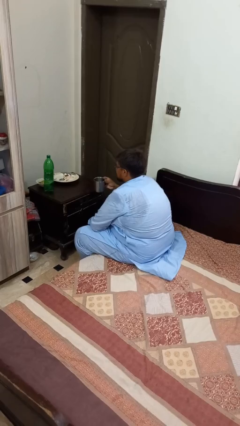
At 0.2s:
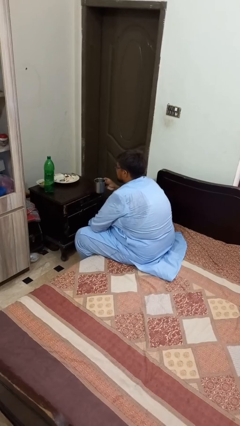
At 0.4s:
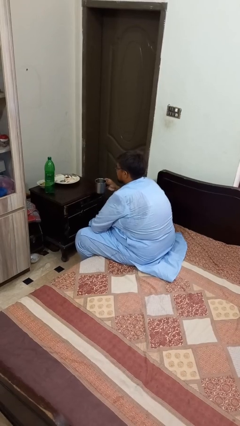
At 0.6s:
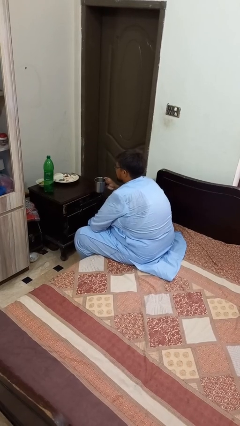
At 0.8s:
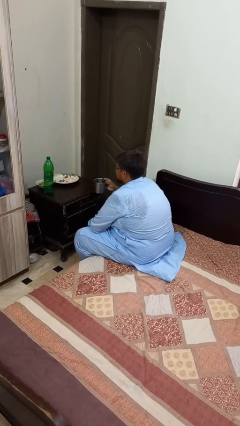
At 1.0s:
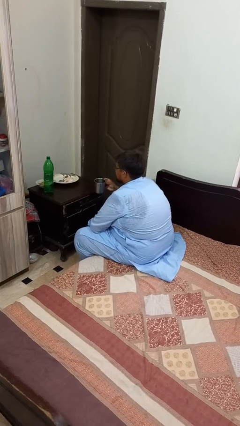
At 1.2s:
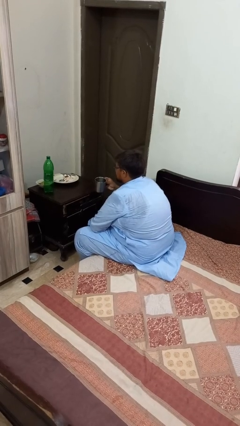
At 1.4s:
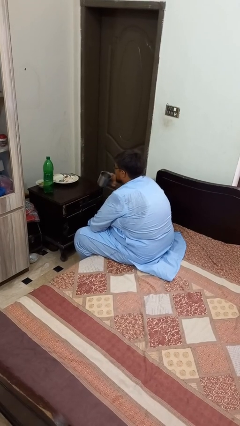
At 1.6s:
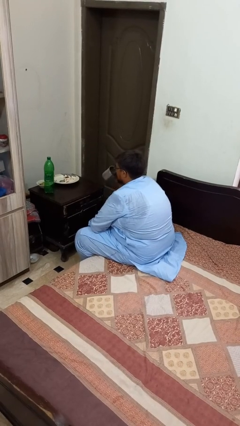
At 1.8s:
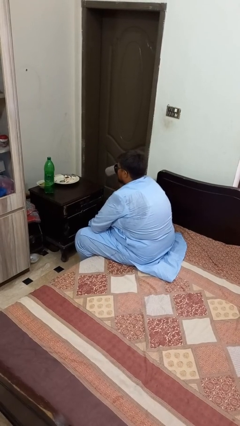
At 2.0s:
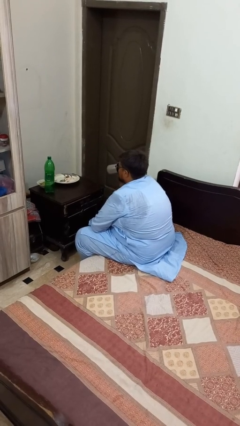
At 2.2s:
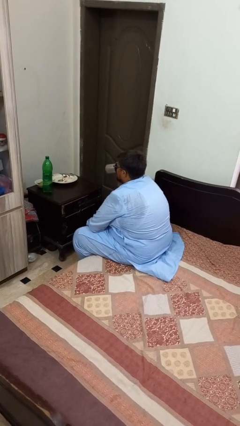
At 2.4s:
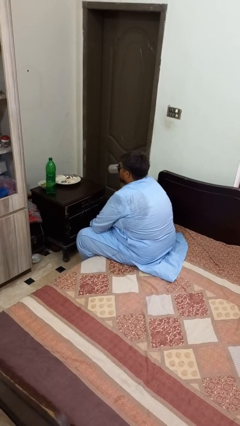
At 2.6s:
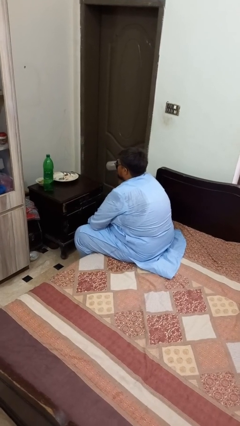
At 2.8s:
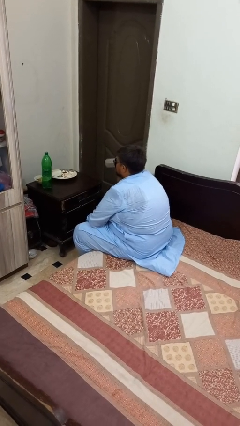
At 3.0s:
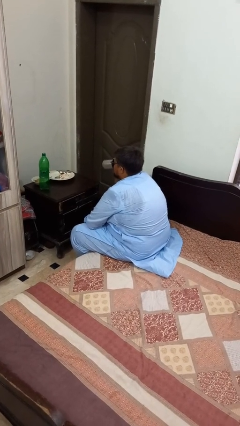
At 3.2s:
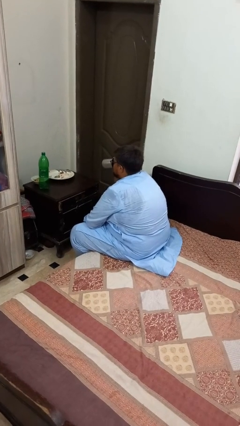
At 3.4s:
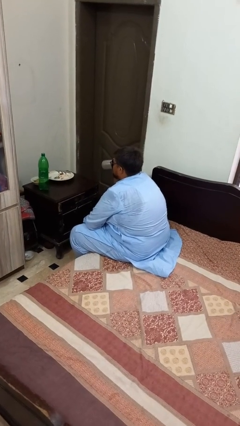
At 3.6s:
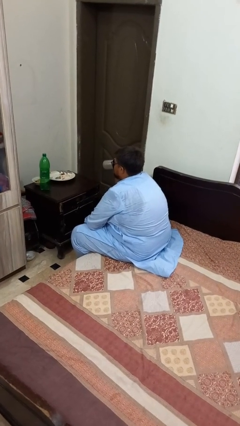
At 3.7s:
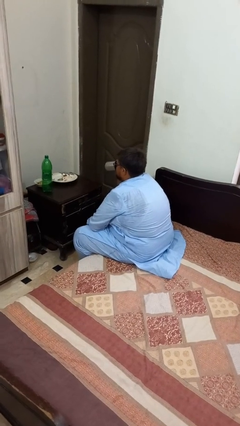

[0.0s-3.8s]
person drinks from mug

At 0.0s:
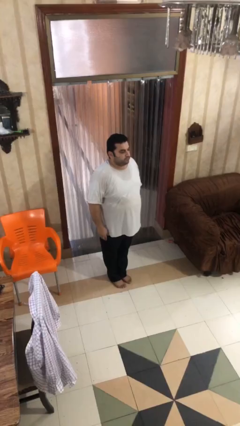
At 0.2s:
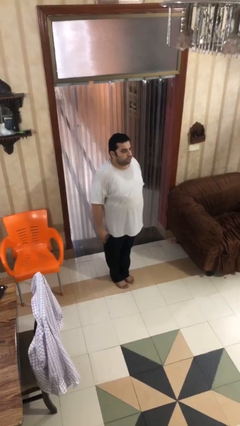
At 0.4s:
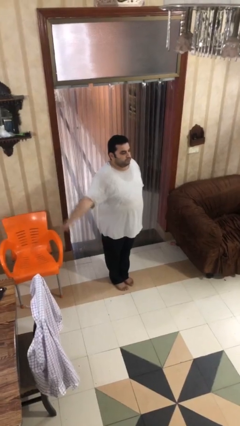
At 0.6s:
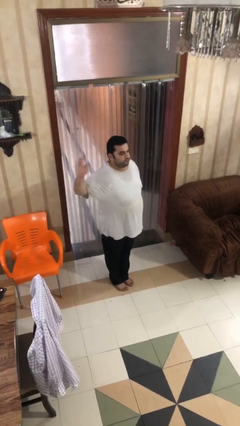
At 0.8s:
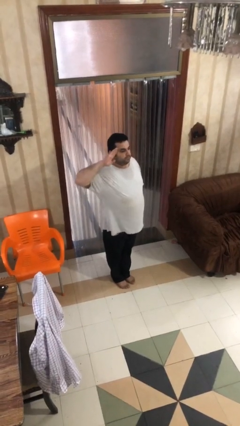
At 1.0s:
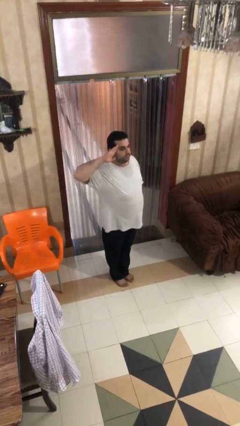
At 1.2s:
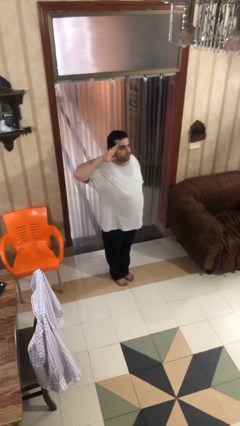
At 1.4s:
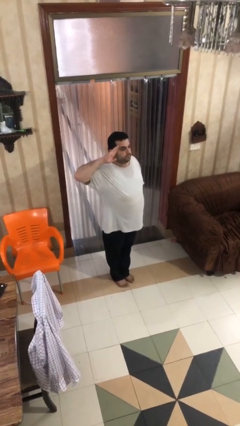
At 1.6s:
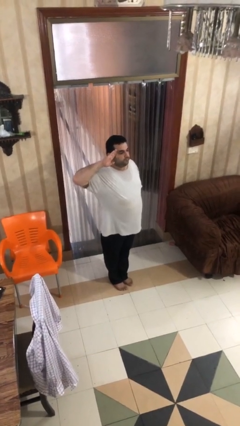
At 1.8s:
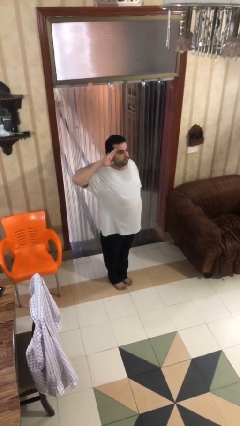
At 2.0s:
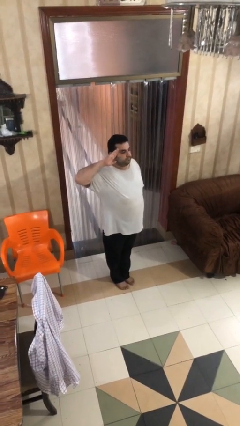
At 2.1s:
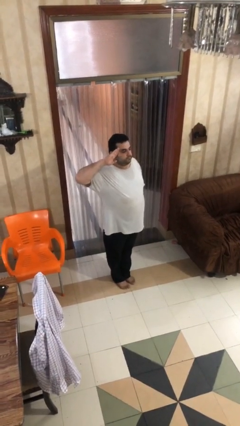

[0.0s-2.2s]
person salutes

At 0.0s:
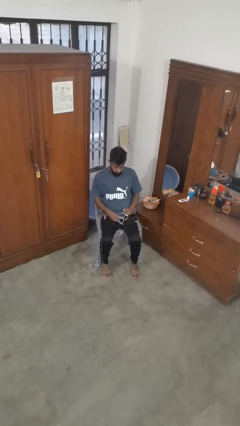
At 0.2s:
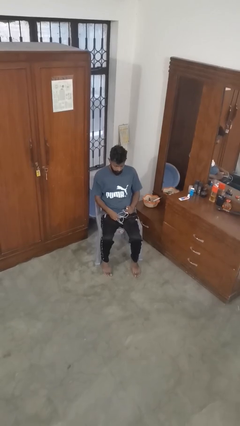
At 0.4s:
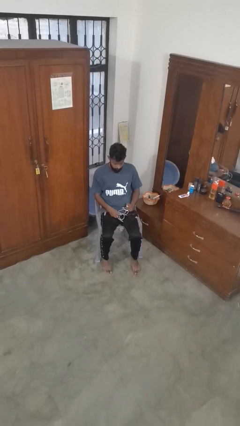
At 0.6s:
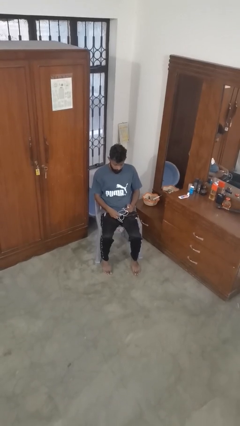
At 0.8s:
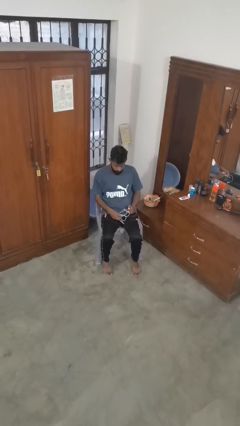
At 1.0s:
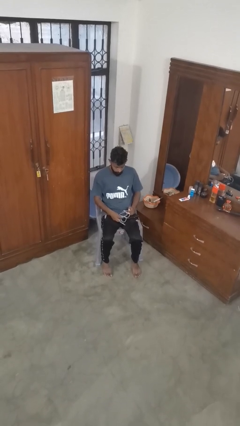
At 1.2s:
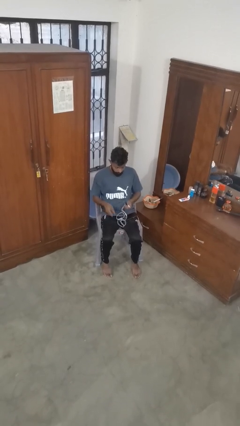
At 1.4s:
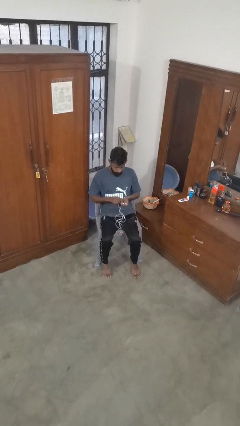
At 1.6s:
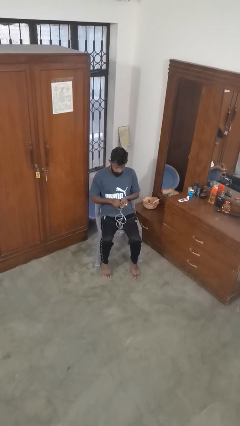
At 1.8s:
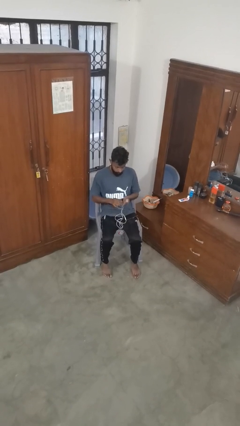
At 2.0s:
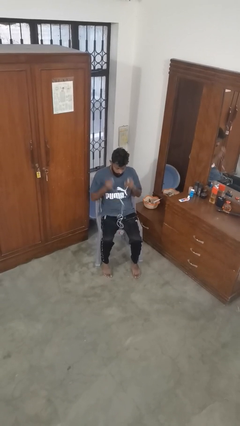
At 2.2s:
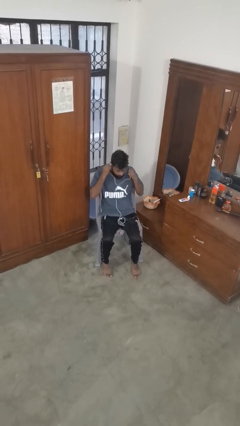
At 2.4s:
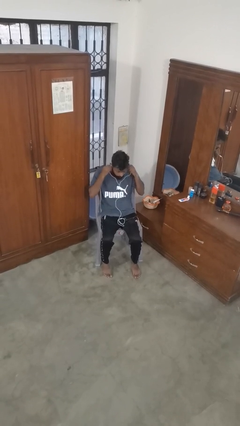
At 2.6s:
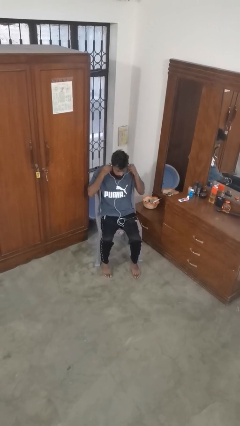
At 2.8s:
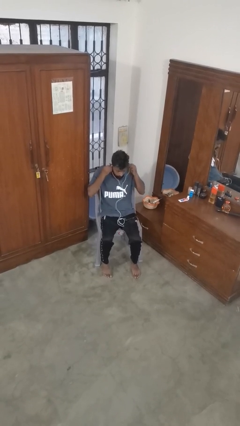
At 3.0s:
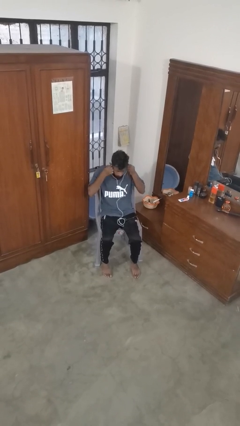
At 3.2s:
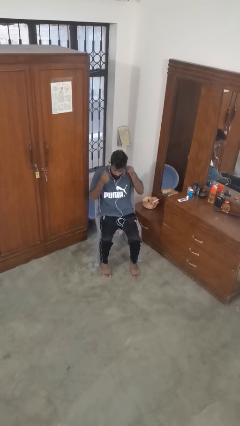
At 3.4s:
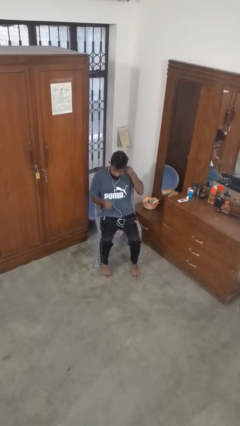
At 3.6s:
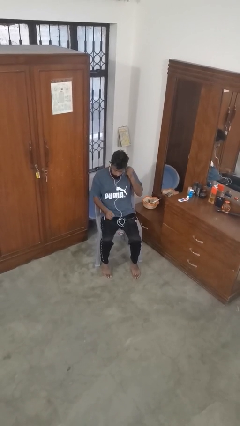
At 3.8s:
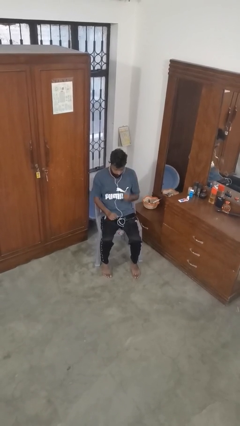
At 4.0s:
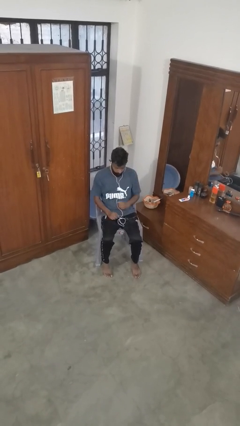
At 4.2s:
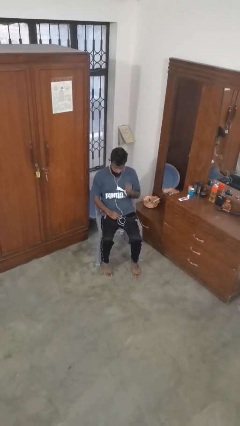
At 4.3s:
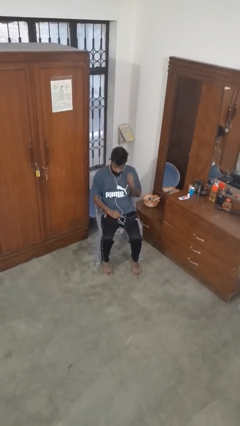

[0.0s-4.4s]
person puts on headphones

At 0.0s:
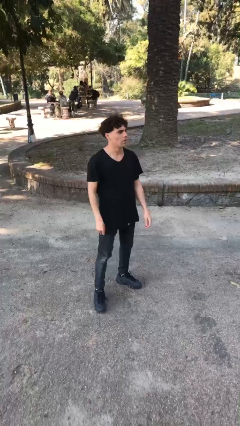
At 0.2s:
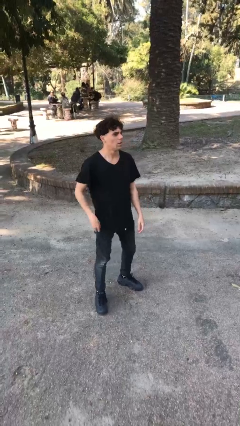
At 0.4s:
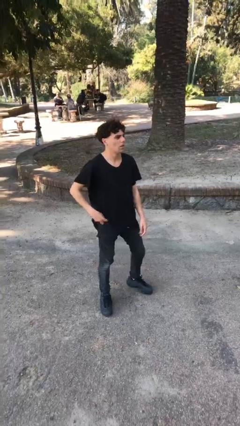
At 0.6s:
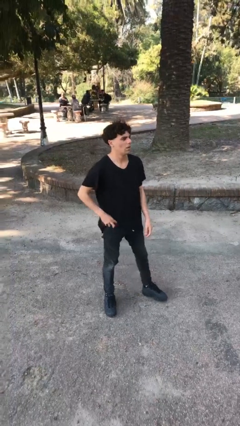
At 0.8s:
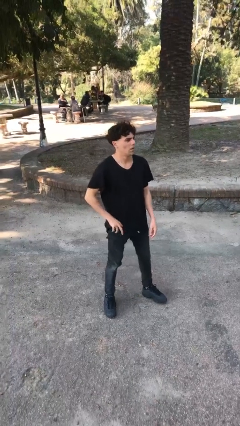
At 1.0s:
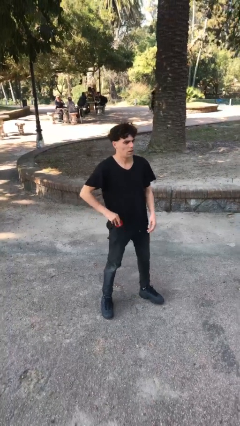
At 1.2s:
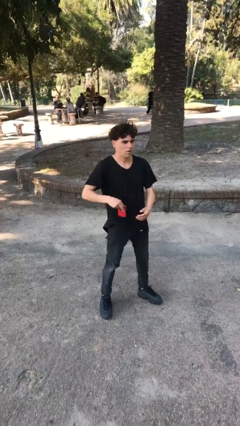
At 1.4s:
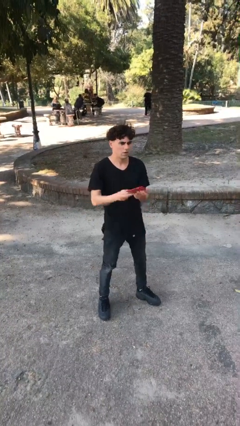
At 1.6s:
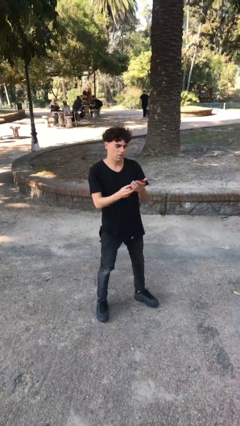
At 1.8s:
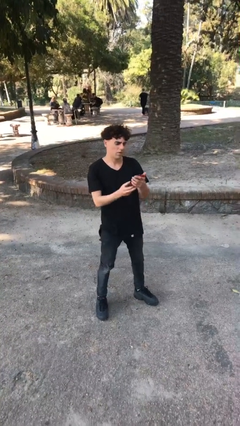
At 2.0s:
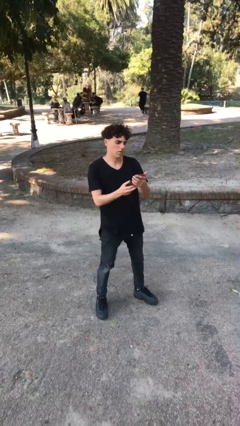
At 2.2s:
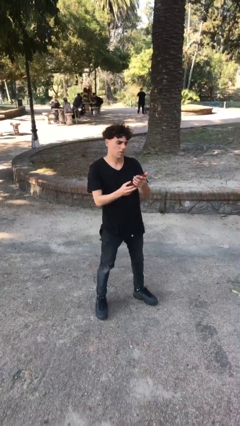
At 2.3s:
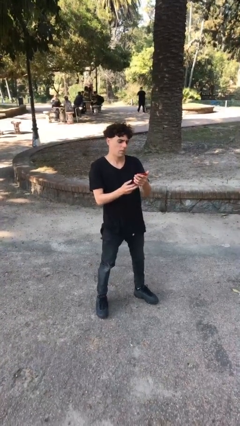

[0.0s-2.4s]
person takes phone from pocket

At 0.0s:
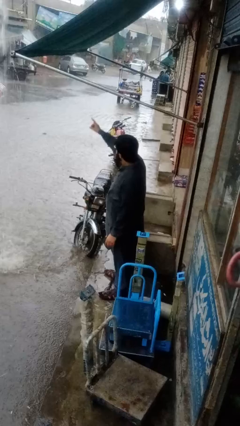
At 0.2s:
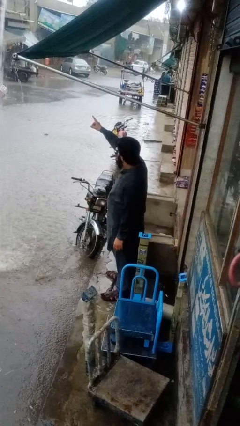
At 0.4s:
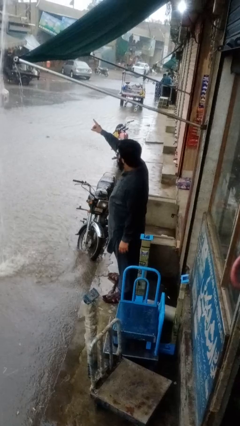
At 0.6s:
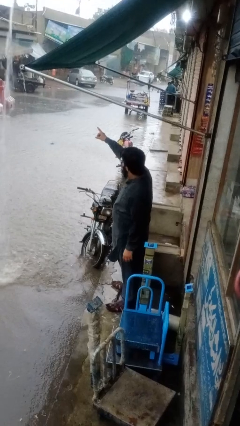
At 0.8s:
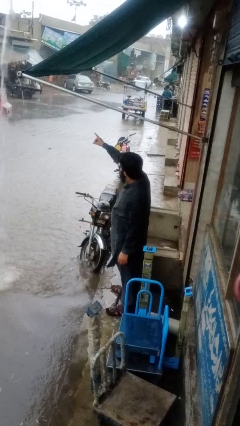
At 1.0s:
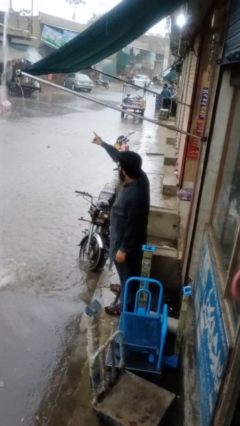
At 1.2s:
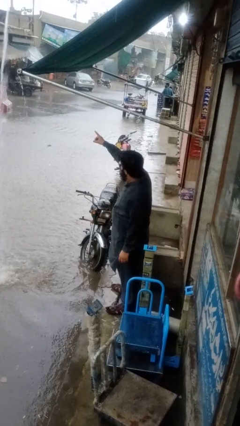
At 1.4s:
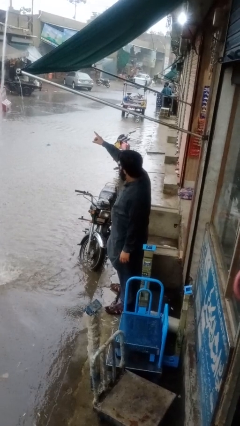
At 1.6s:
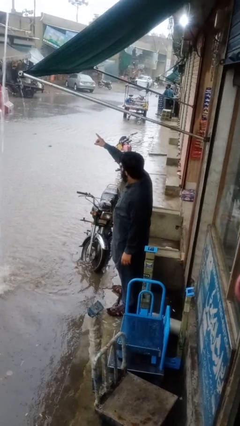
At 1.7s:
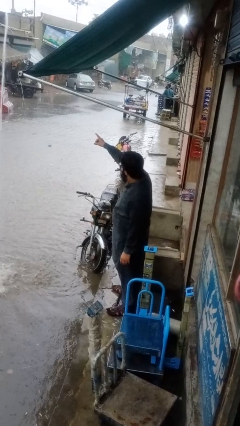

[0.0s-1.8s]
person points at person

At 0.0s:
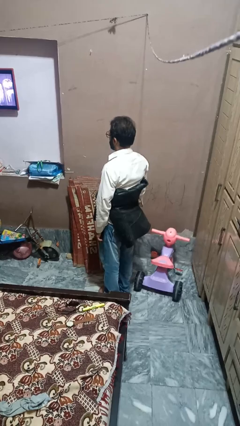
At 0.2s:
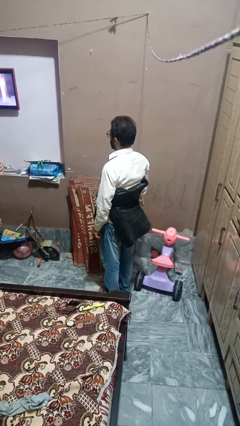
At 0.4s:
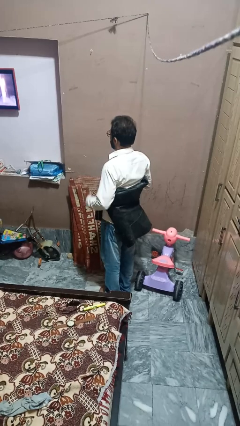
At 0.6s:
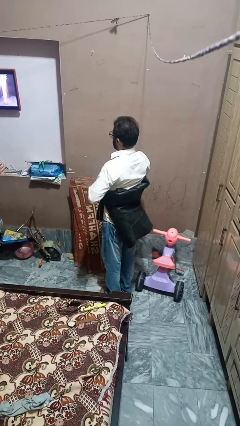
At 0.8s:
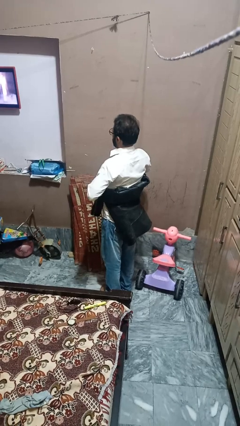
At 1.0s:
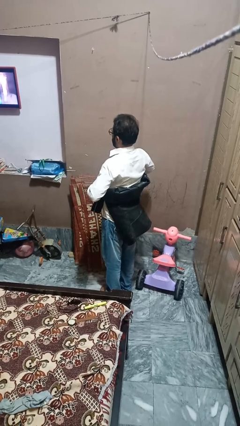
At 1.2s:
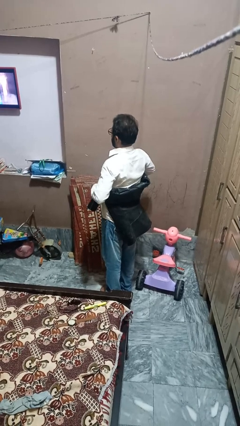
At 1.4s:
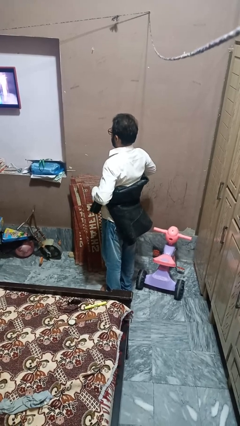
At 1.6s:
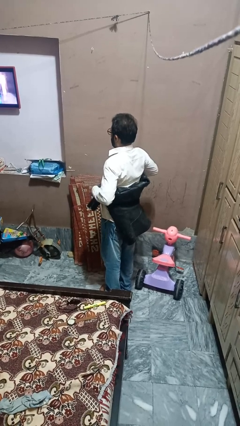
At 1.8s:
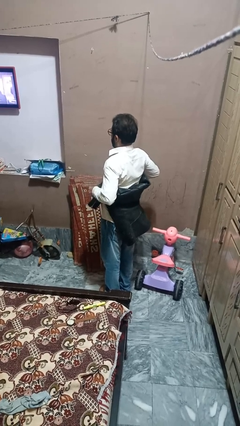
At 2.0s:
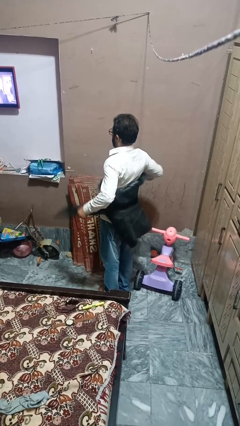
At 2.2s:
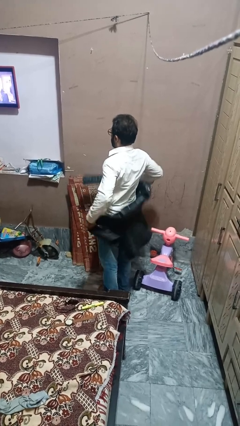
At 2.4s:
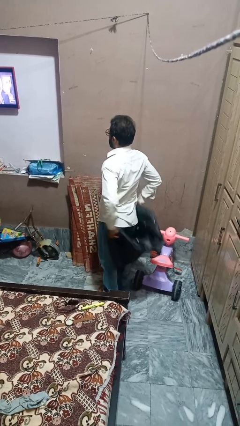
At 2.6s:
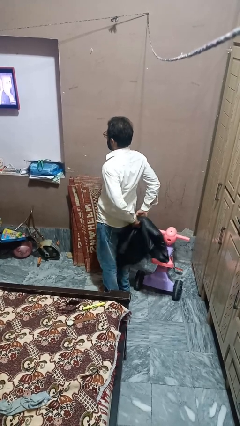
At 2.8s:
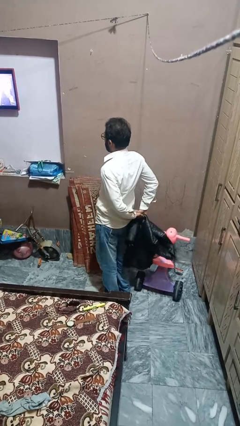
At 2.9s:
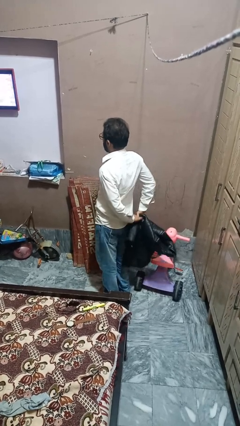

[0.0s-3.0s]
person unties jacket around waist
